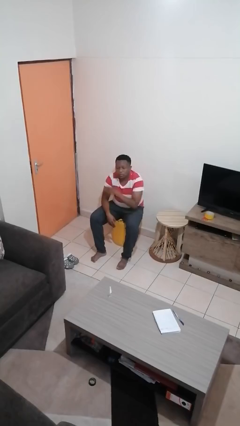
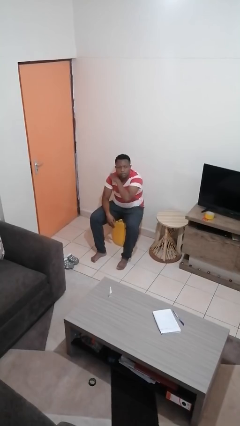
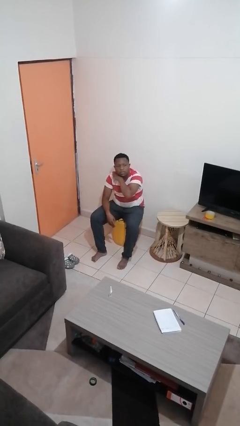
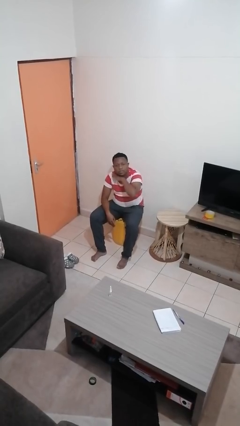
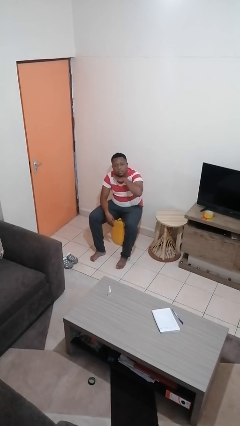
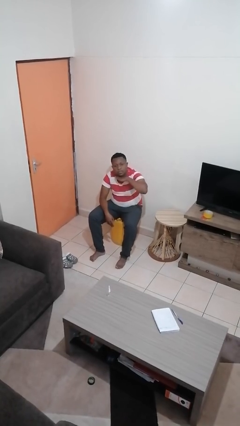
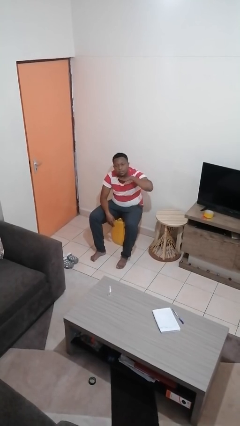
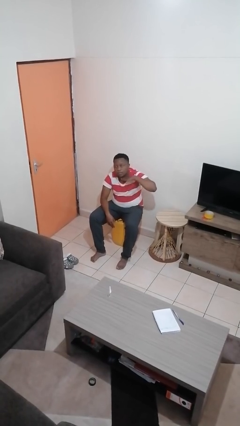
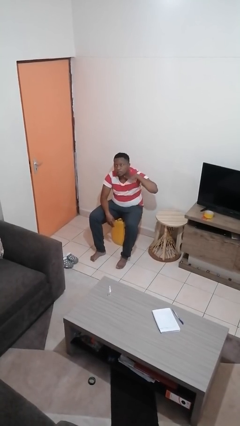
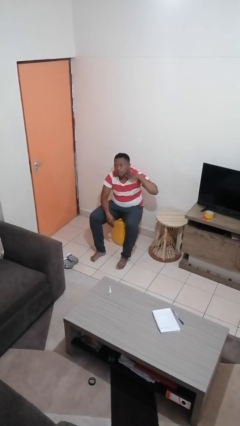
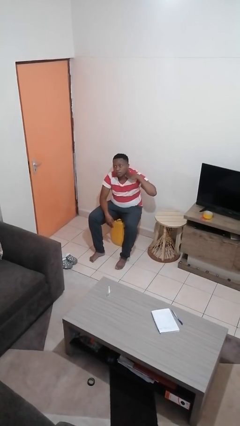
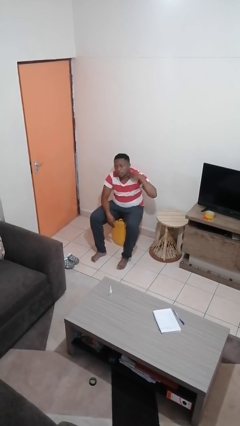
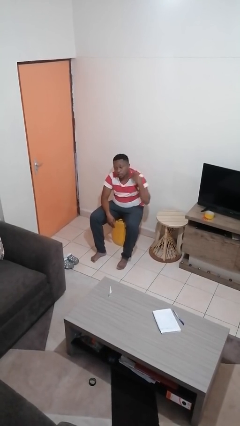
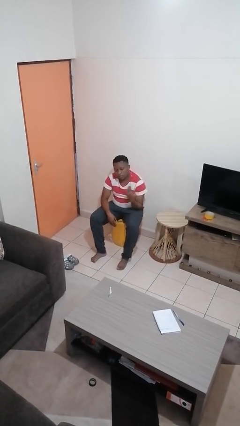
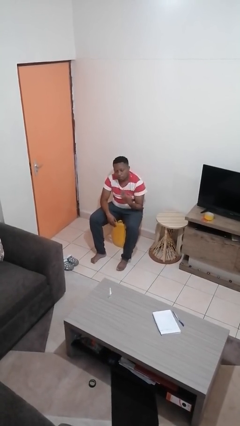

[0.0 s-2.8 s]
person gestures cut

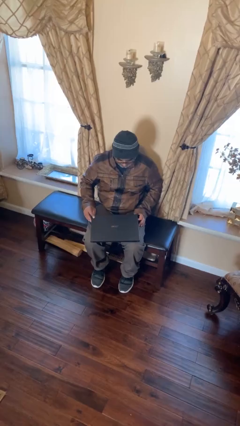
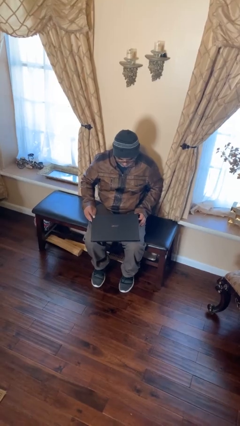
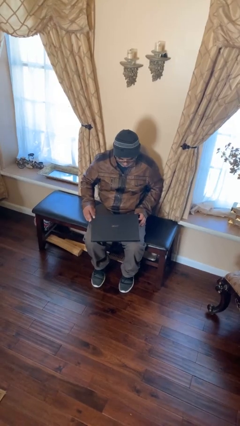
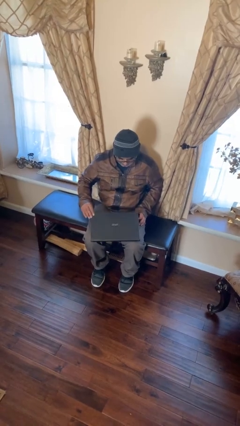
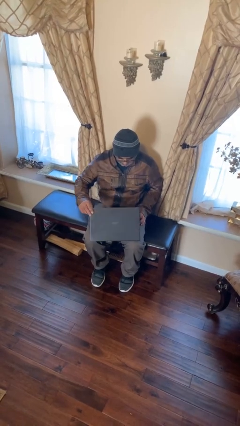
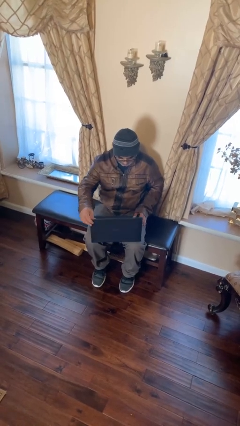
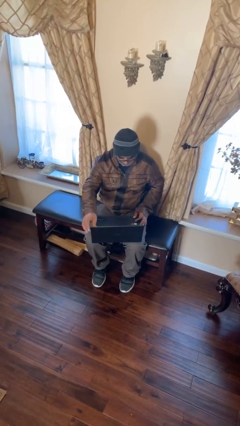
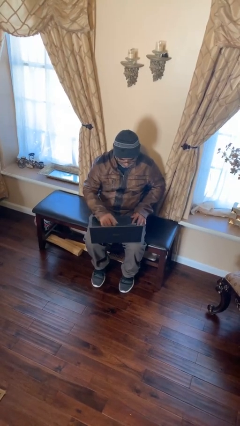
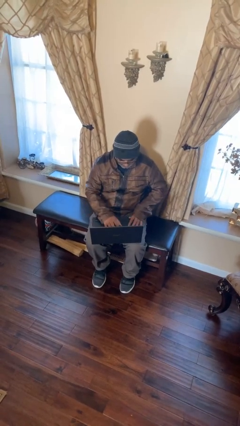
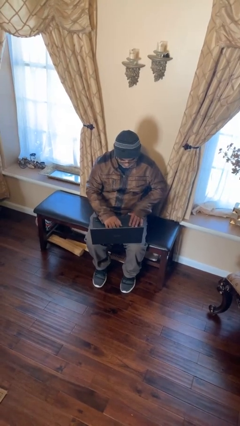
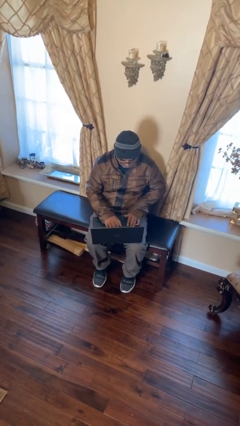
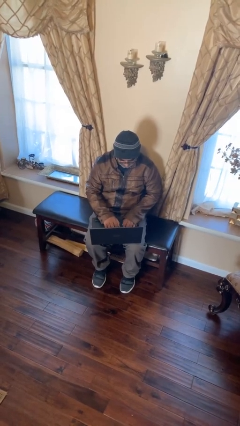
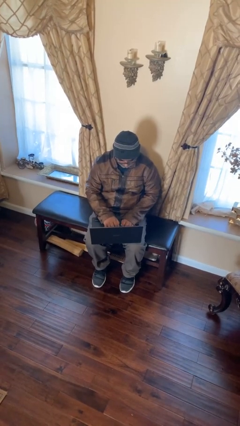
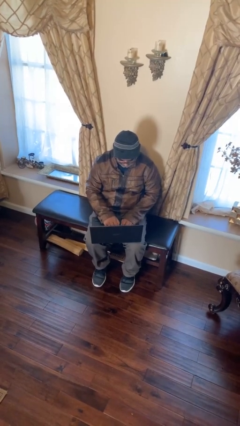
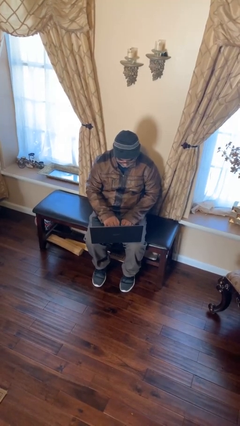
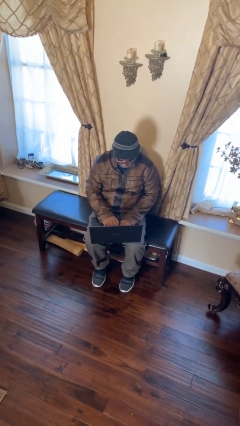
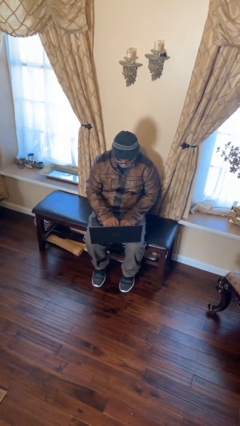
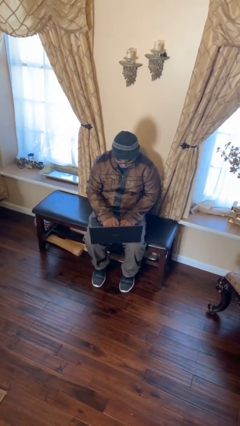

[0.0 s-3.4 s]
person interacts with laptop

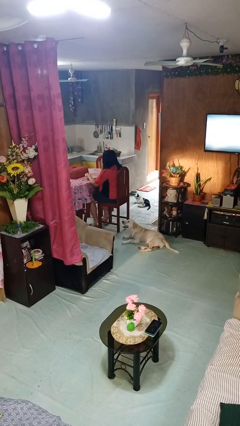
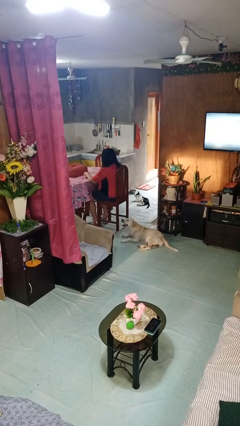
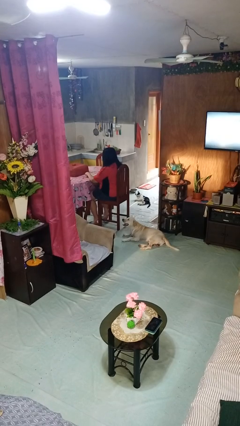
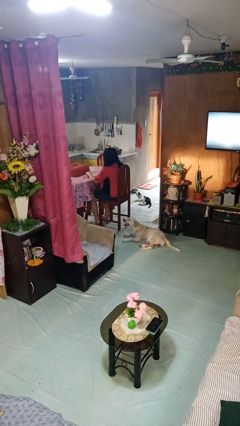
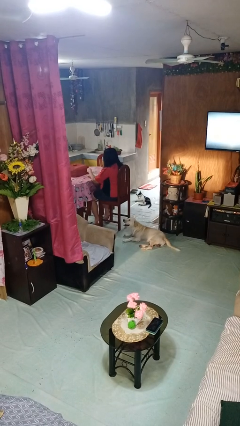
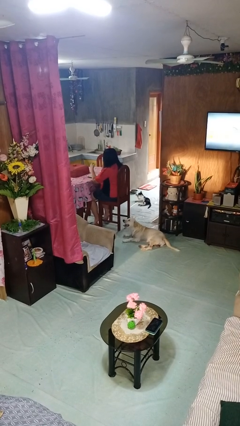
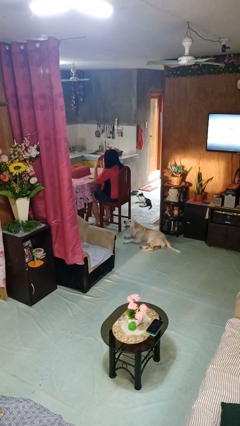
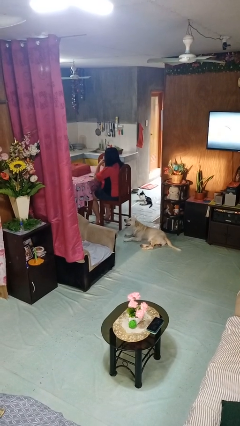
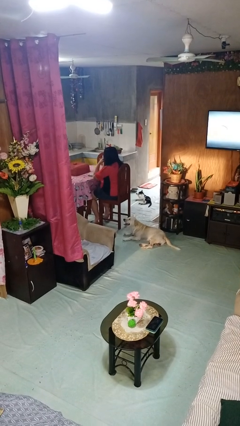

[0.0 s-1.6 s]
person eats with hands

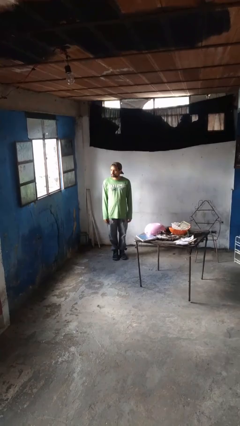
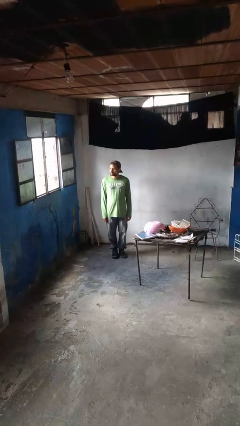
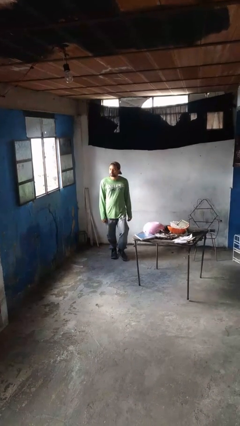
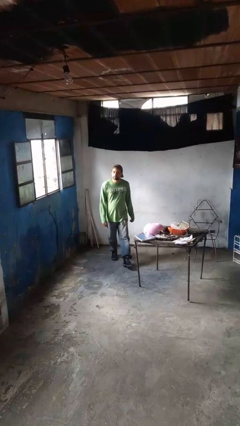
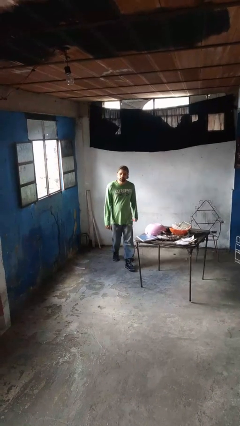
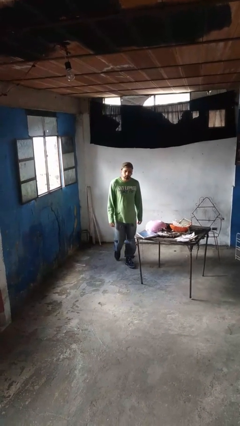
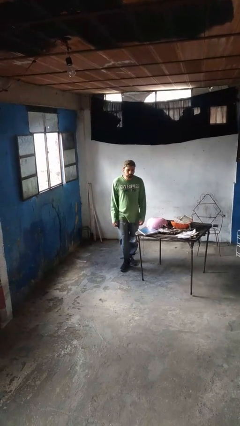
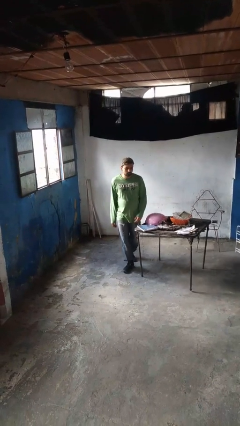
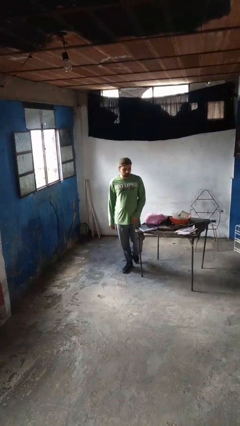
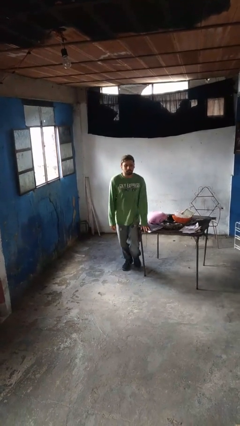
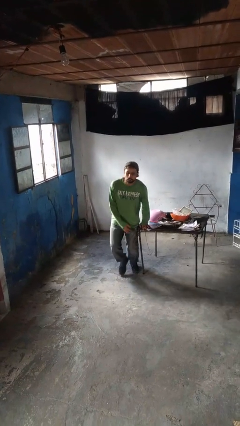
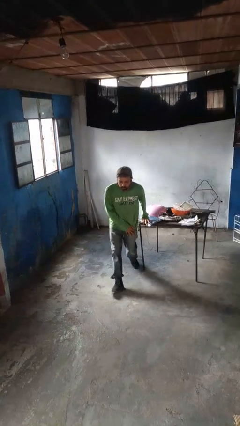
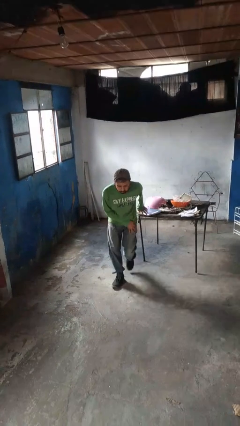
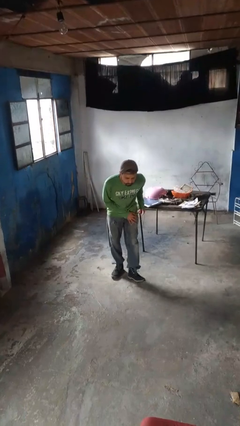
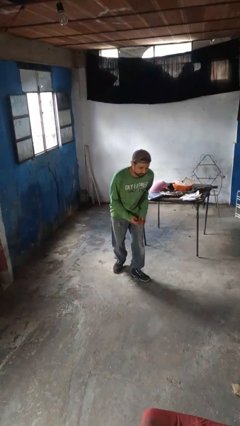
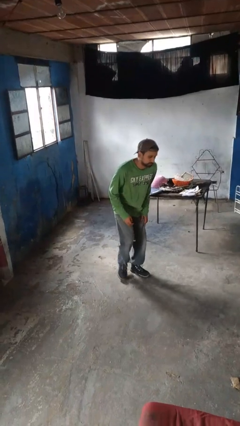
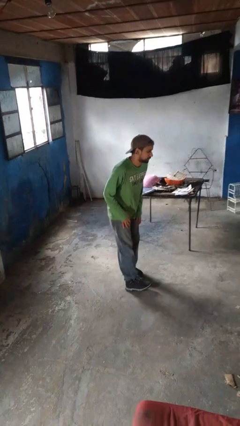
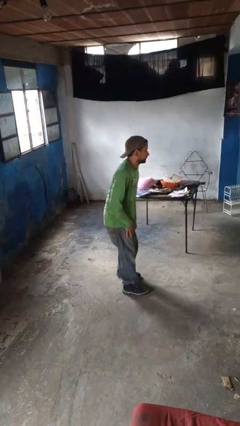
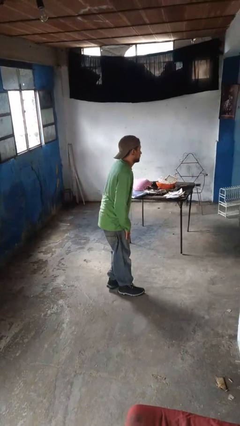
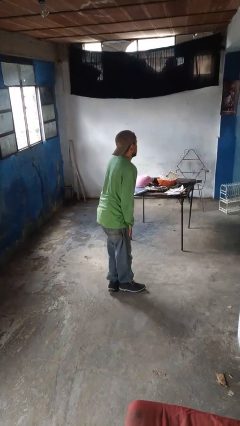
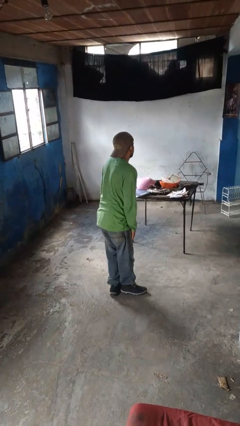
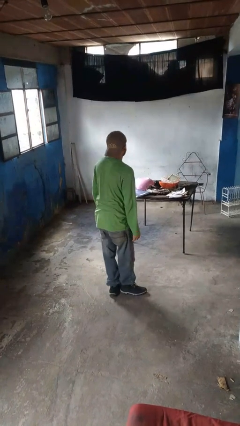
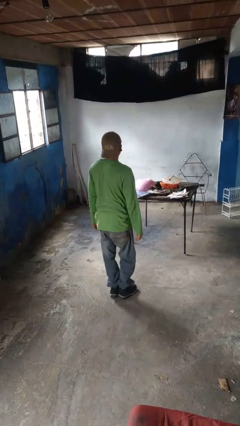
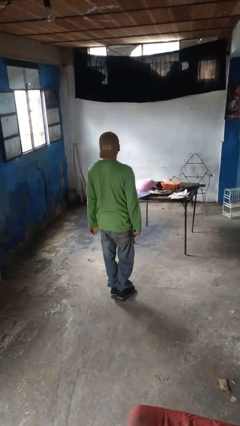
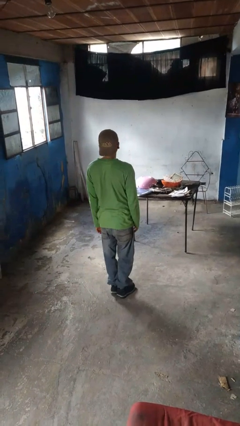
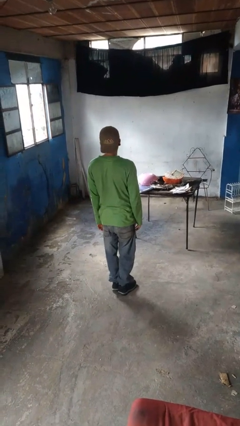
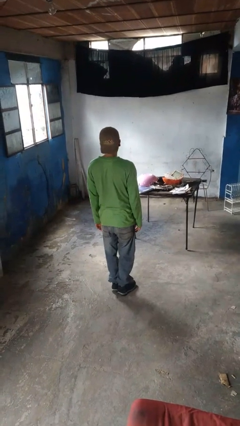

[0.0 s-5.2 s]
person bumps into table

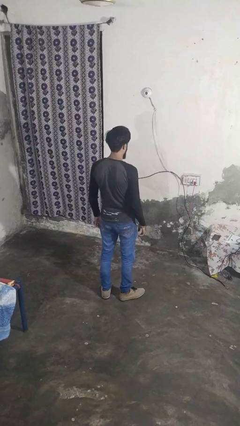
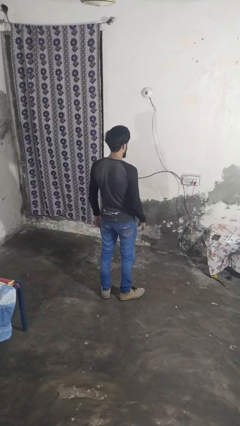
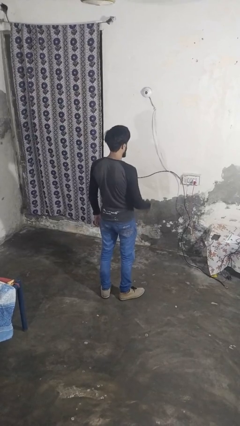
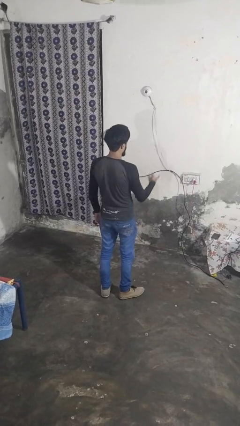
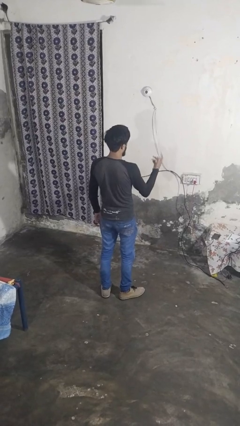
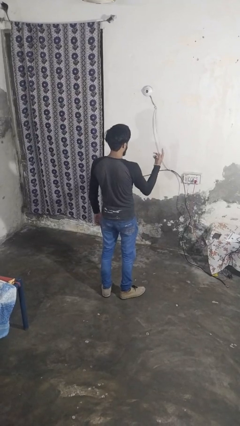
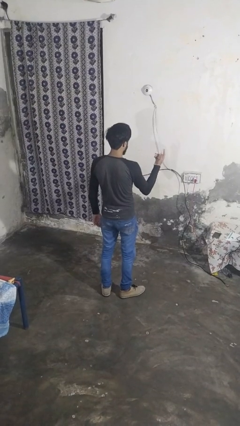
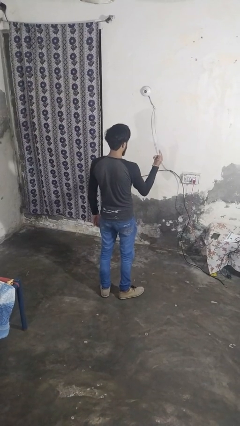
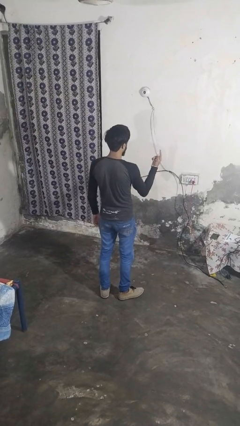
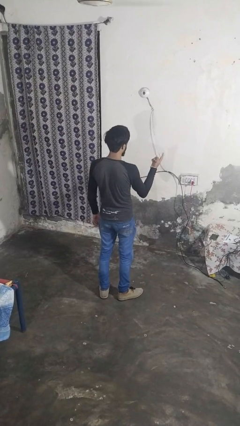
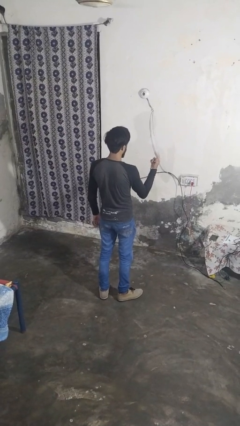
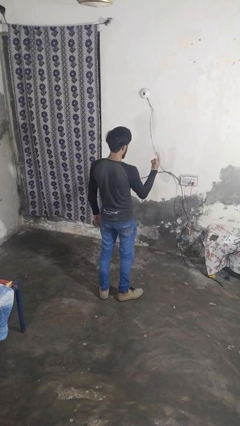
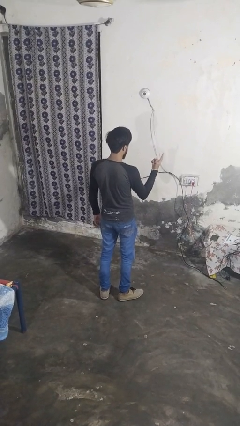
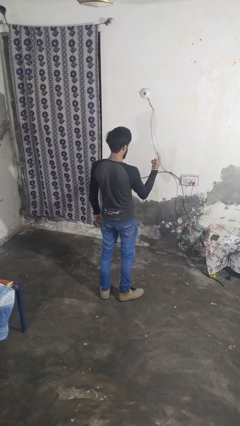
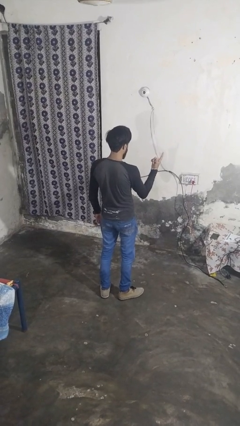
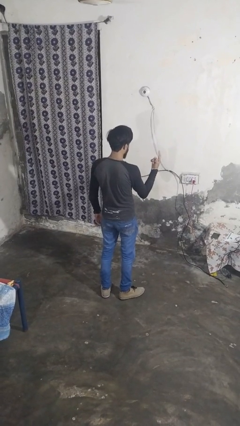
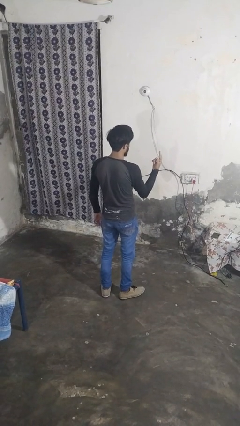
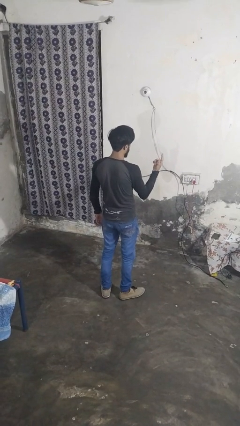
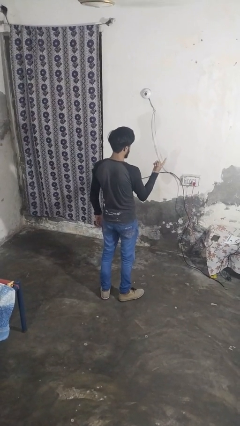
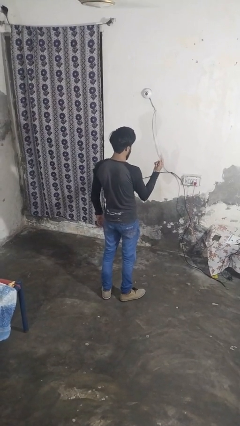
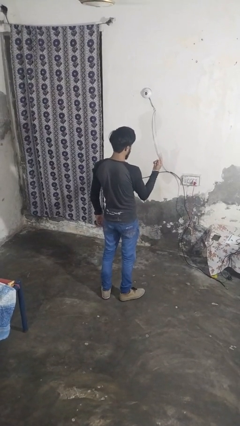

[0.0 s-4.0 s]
person gestures come here

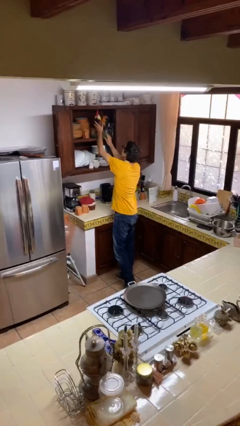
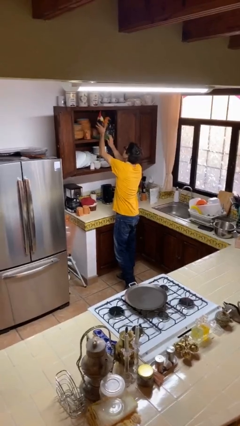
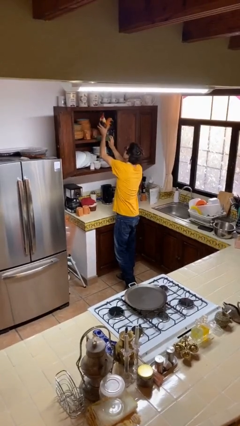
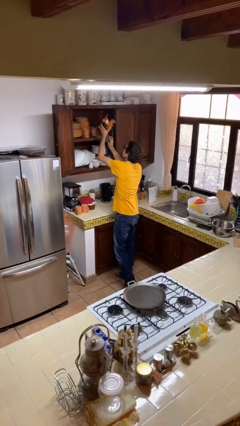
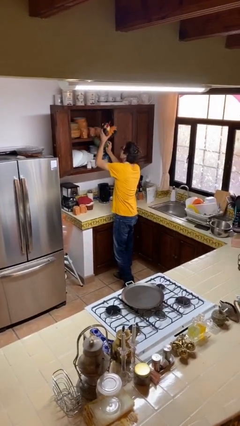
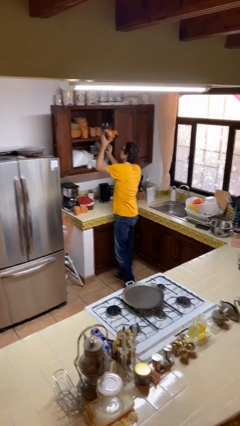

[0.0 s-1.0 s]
person picks up object from shelf
